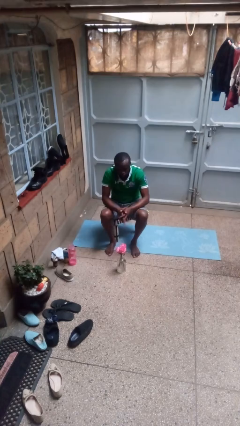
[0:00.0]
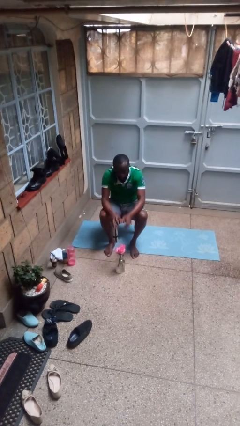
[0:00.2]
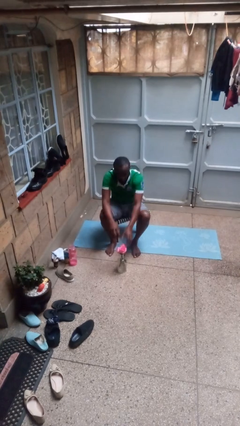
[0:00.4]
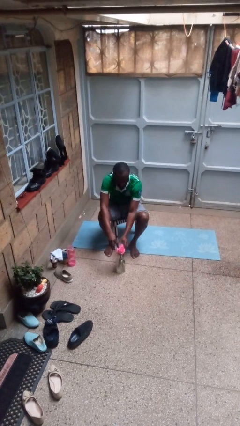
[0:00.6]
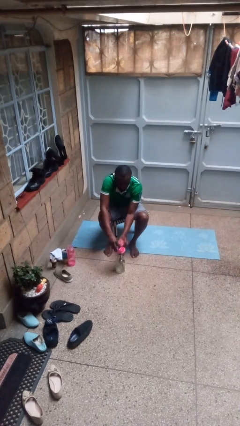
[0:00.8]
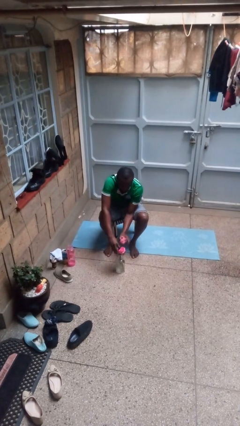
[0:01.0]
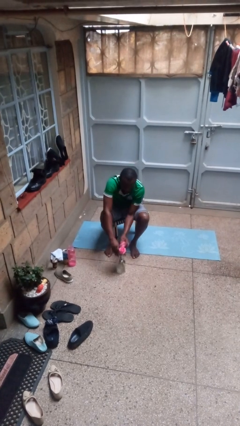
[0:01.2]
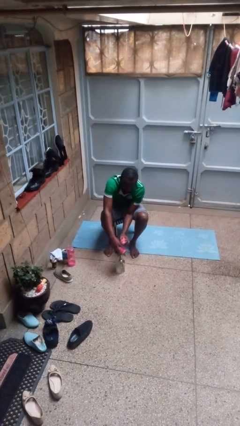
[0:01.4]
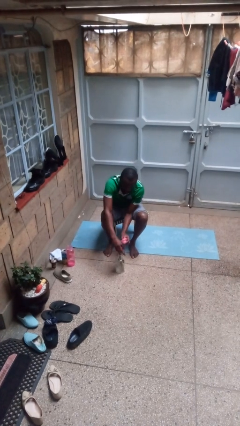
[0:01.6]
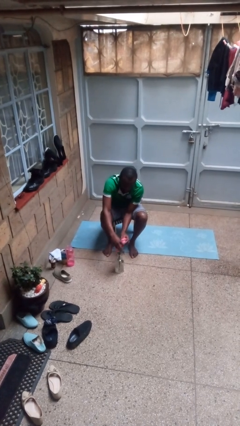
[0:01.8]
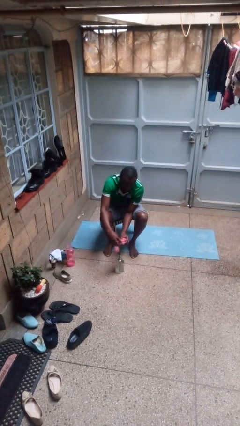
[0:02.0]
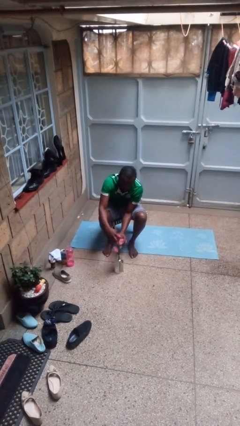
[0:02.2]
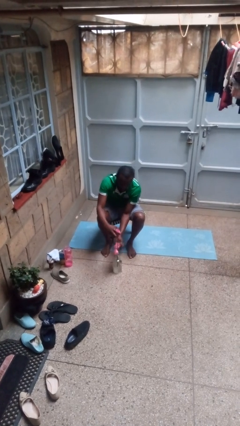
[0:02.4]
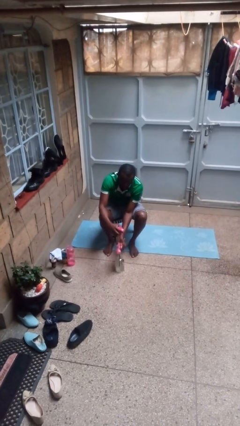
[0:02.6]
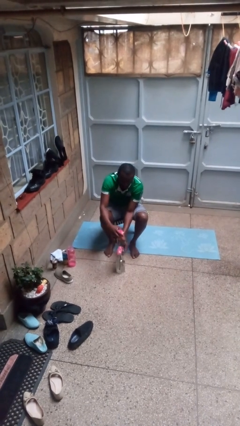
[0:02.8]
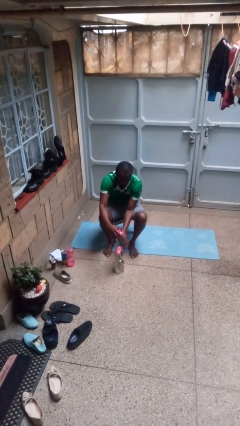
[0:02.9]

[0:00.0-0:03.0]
person arranges flowers in vase

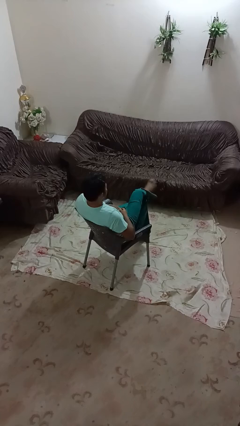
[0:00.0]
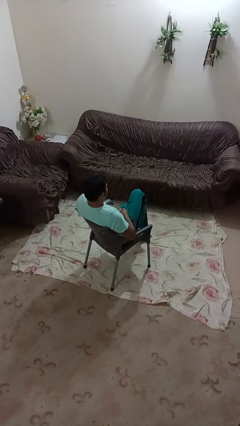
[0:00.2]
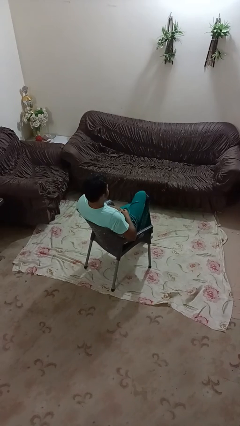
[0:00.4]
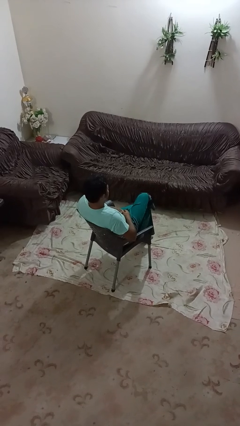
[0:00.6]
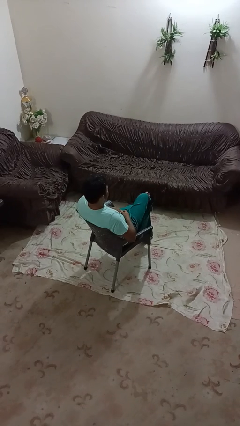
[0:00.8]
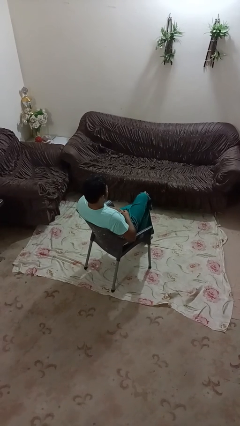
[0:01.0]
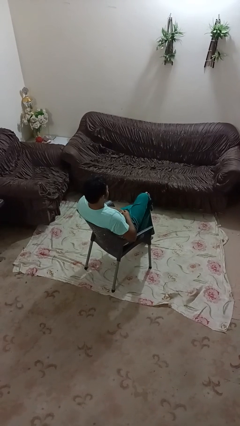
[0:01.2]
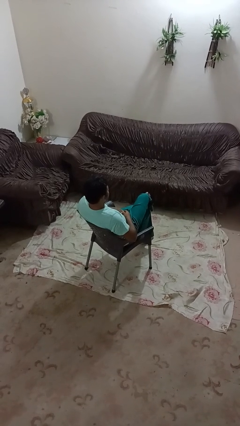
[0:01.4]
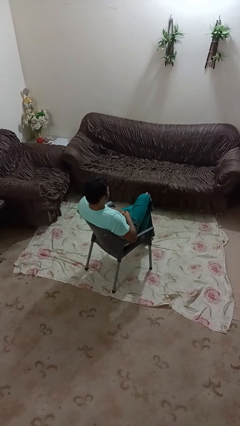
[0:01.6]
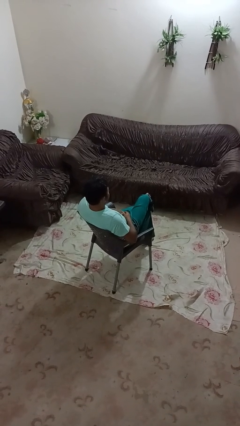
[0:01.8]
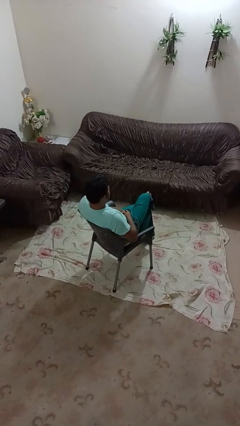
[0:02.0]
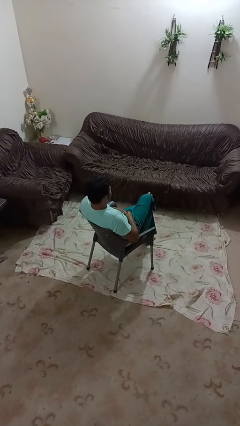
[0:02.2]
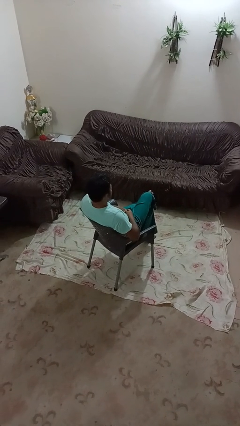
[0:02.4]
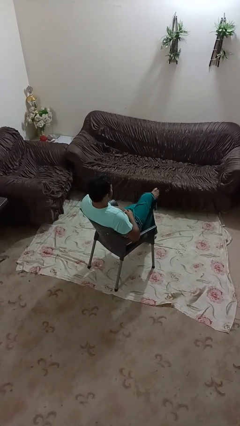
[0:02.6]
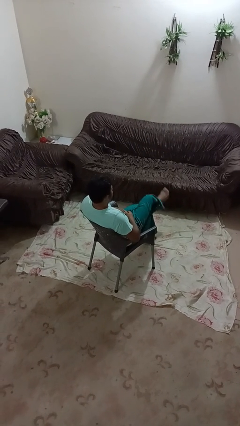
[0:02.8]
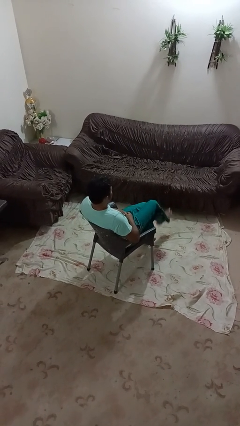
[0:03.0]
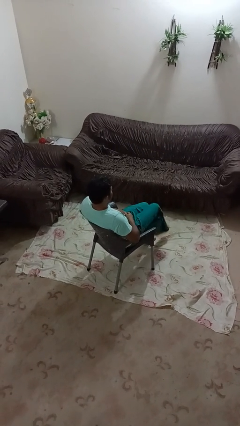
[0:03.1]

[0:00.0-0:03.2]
person crosses legs

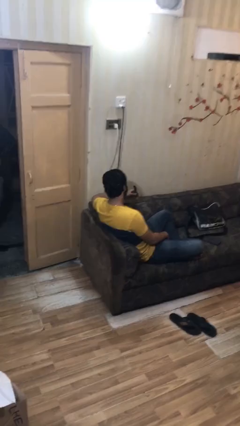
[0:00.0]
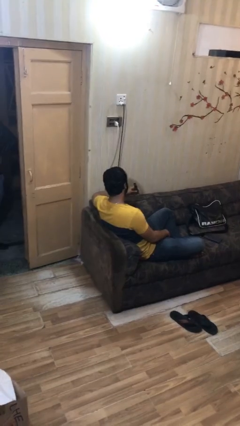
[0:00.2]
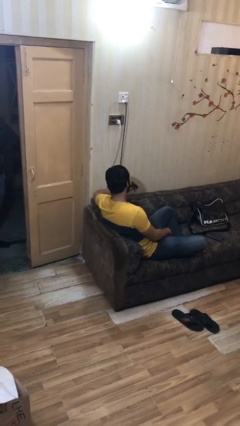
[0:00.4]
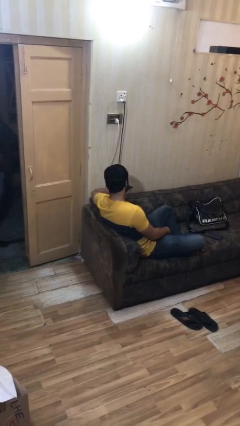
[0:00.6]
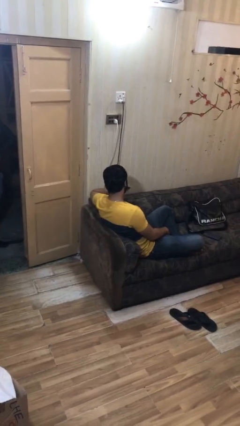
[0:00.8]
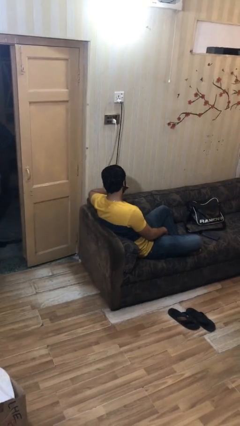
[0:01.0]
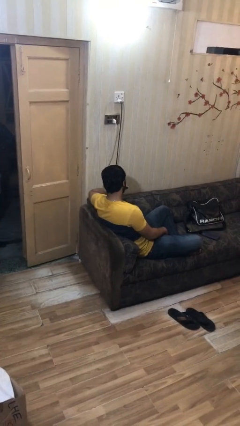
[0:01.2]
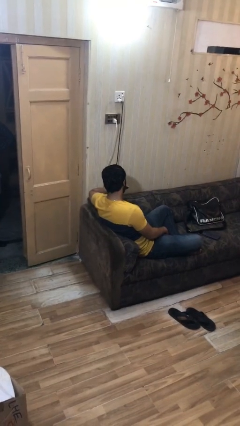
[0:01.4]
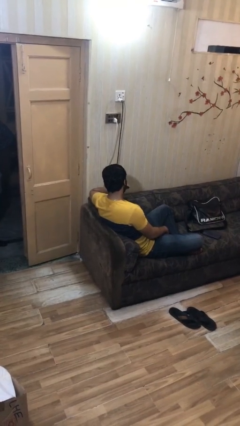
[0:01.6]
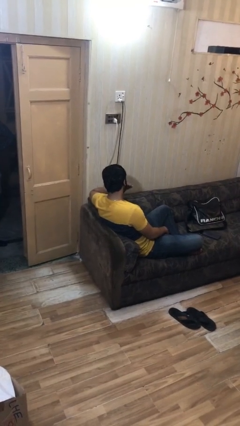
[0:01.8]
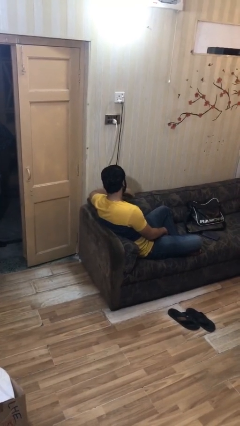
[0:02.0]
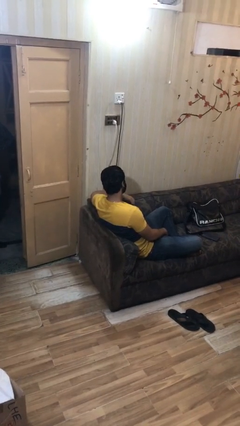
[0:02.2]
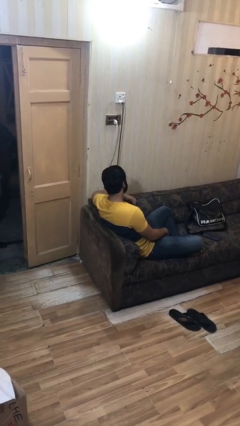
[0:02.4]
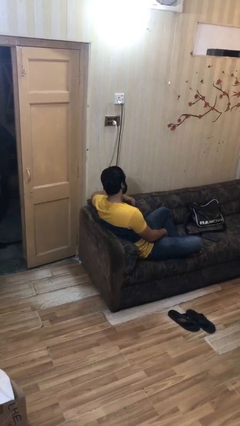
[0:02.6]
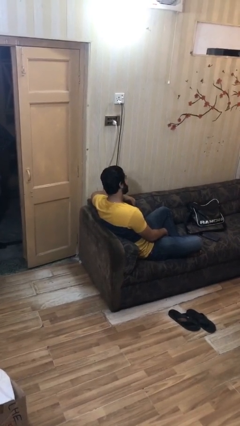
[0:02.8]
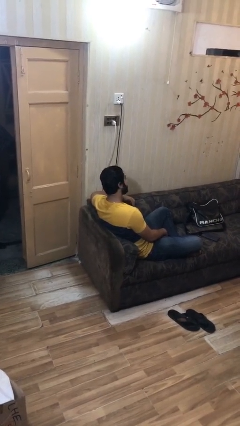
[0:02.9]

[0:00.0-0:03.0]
person vapes

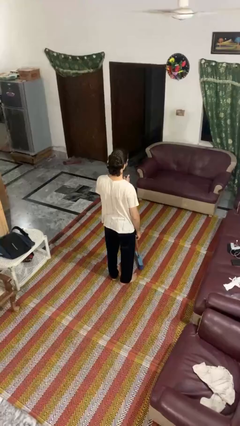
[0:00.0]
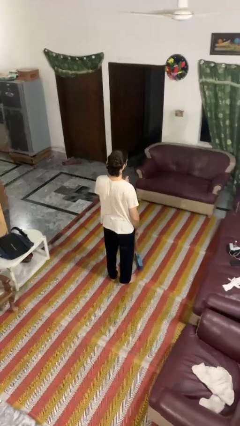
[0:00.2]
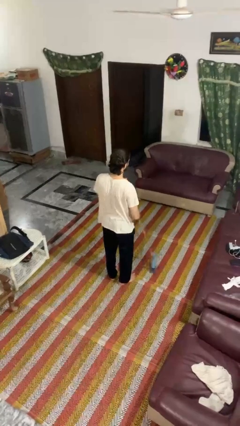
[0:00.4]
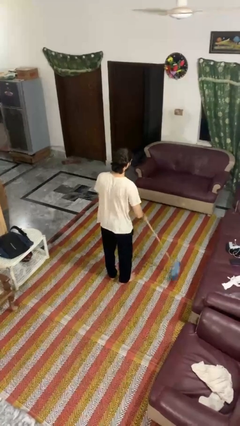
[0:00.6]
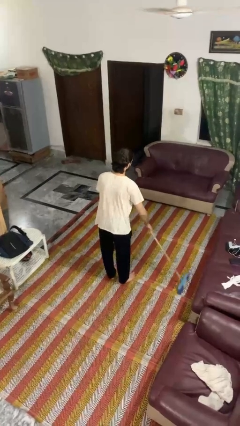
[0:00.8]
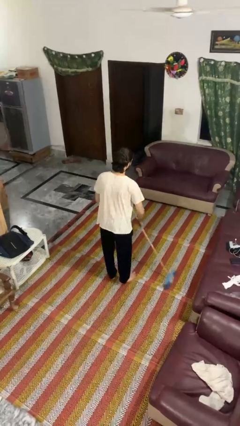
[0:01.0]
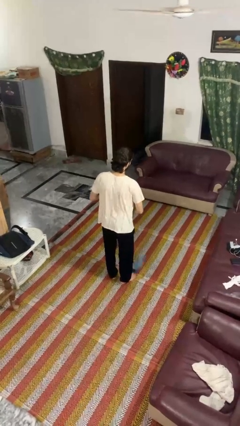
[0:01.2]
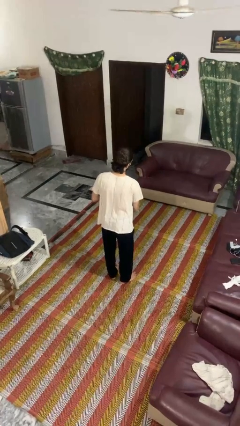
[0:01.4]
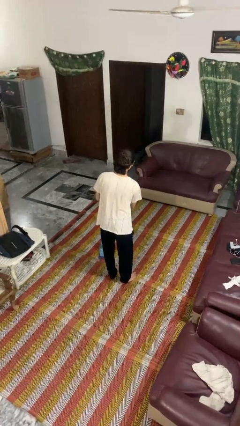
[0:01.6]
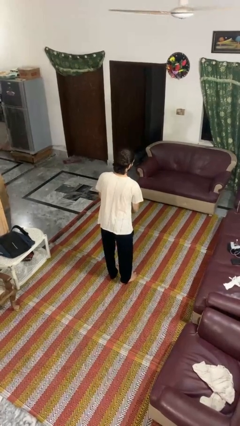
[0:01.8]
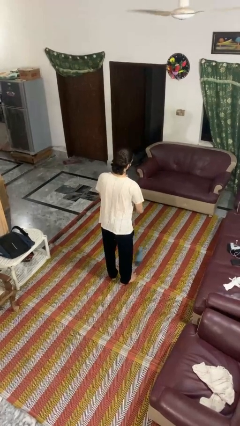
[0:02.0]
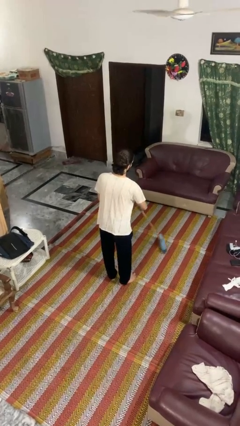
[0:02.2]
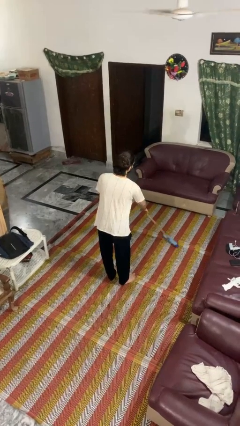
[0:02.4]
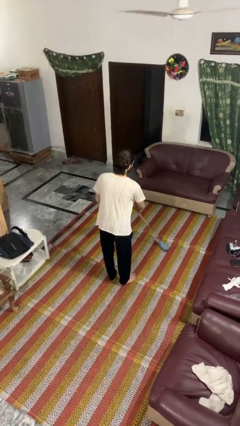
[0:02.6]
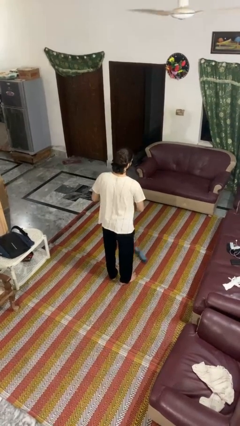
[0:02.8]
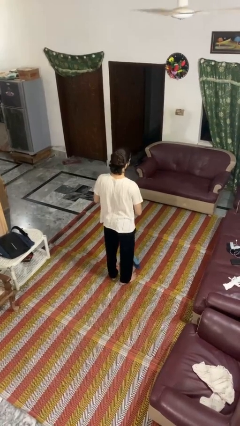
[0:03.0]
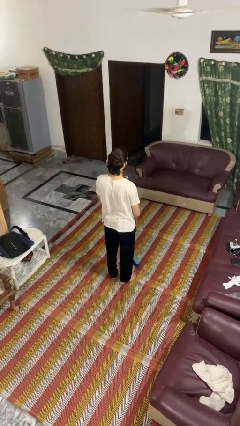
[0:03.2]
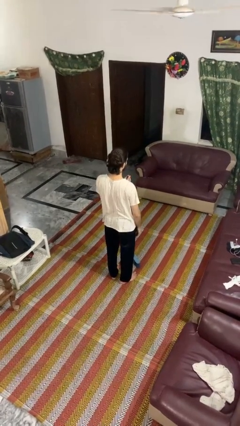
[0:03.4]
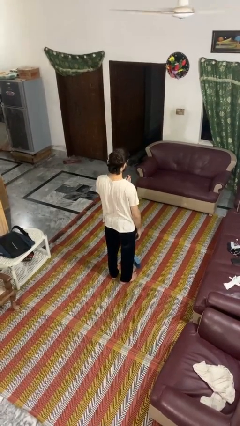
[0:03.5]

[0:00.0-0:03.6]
person sweeps floor

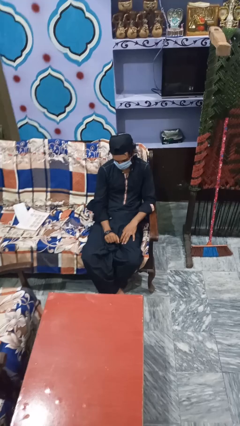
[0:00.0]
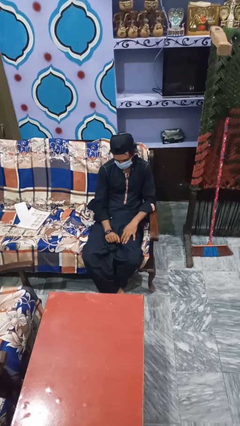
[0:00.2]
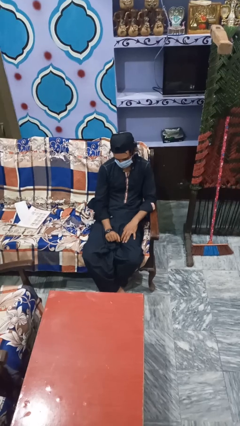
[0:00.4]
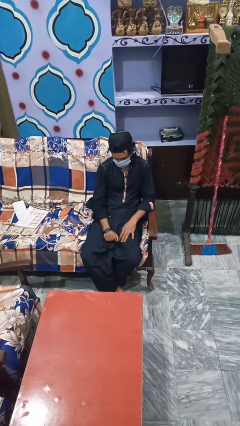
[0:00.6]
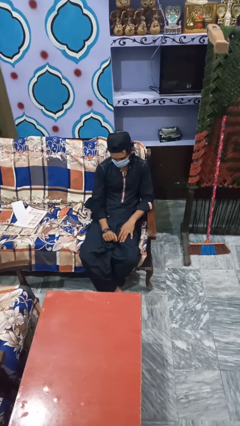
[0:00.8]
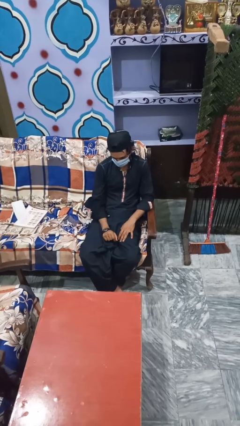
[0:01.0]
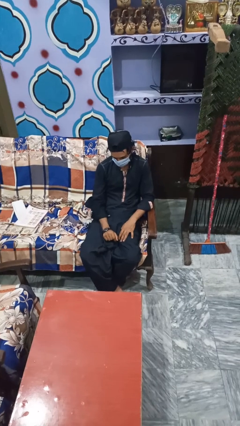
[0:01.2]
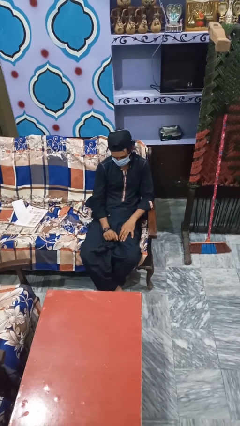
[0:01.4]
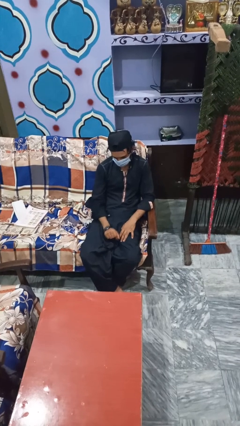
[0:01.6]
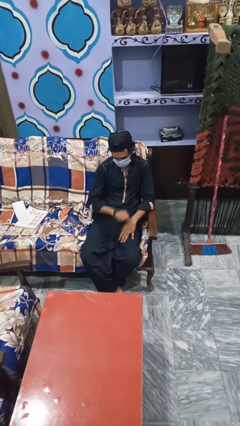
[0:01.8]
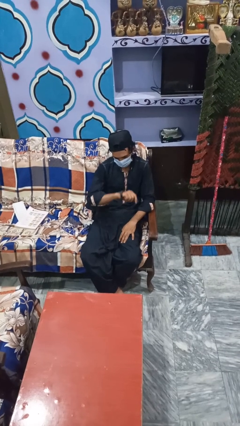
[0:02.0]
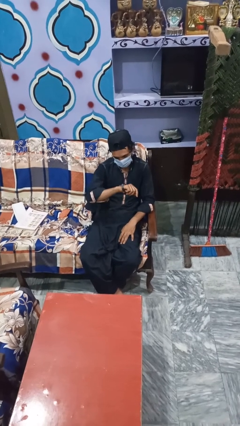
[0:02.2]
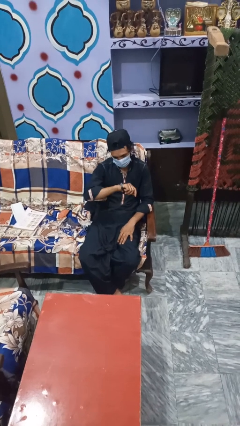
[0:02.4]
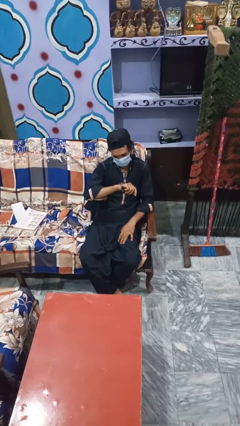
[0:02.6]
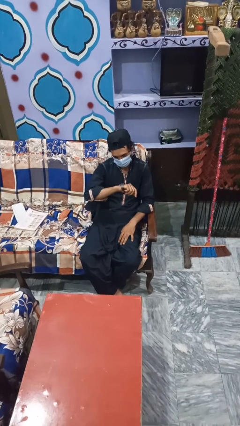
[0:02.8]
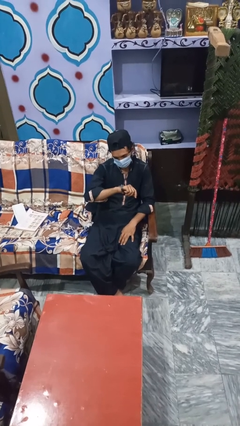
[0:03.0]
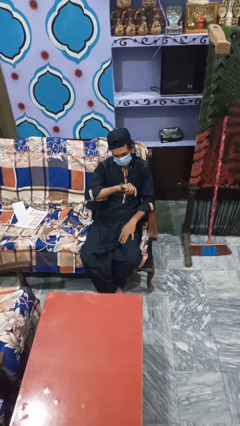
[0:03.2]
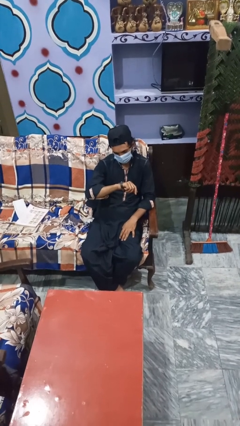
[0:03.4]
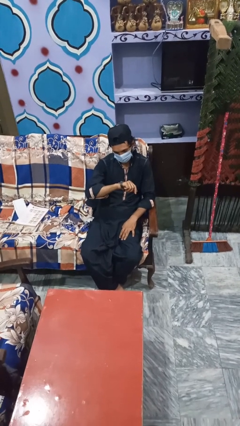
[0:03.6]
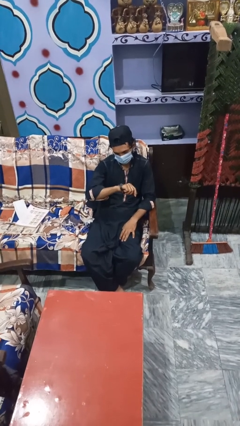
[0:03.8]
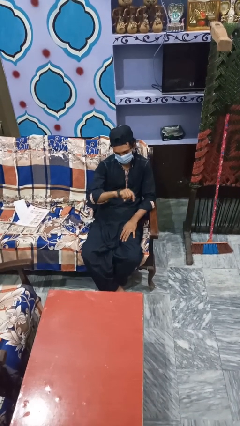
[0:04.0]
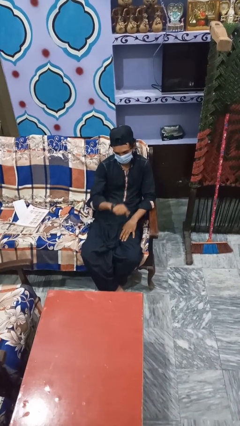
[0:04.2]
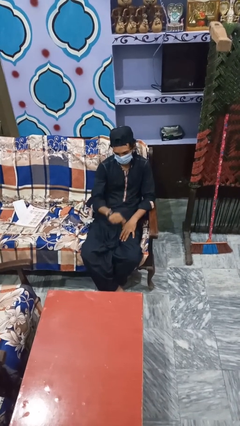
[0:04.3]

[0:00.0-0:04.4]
person looks at wristwatch

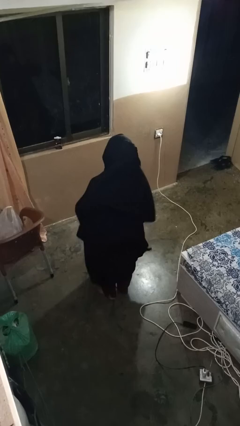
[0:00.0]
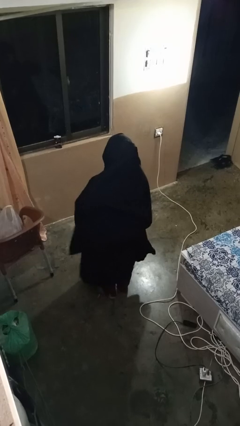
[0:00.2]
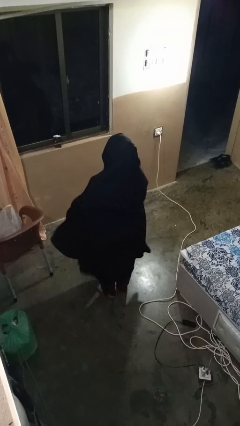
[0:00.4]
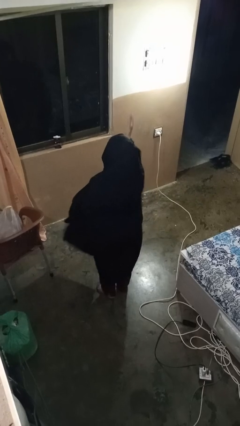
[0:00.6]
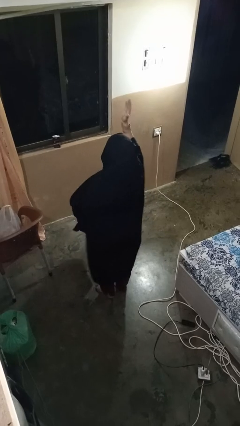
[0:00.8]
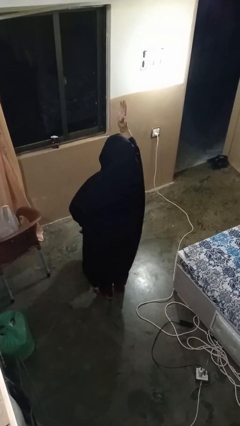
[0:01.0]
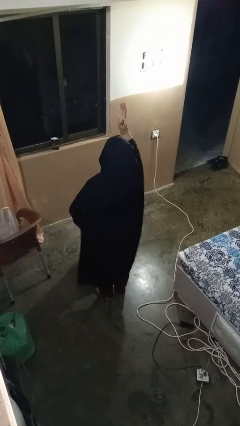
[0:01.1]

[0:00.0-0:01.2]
person gestures raise hand
